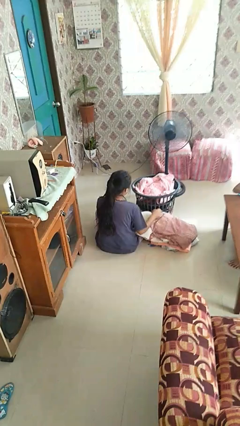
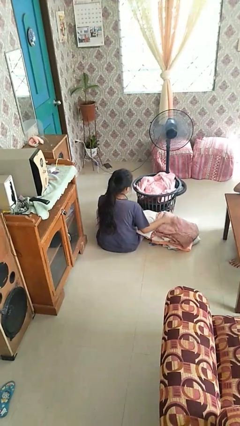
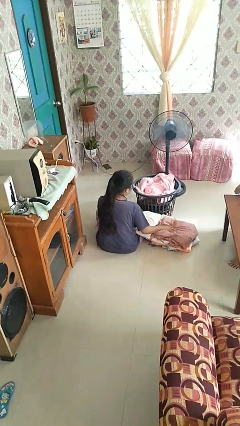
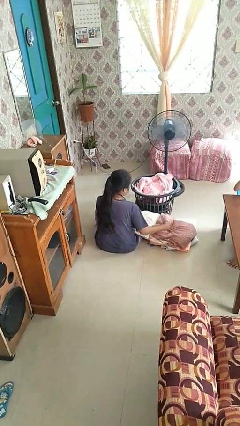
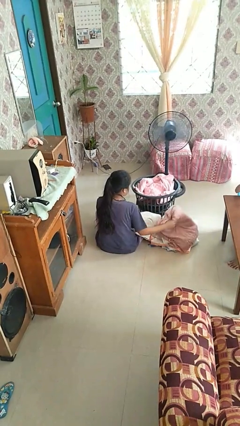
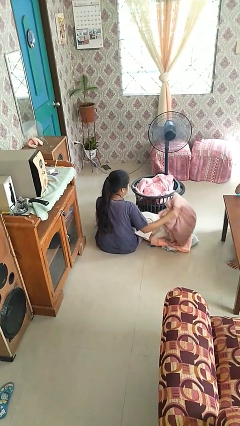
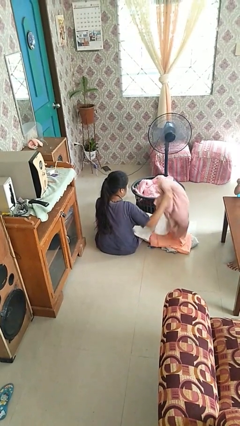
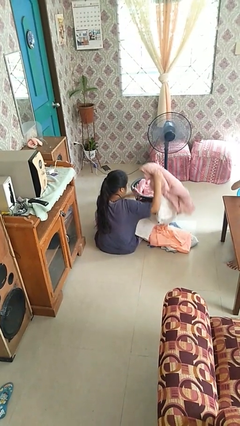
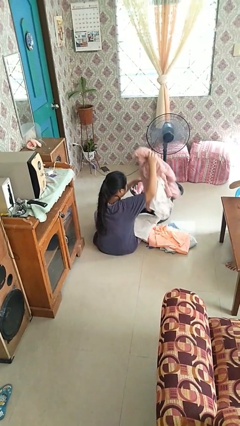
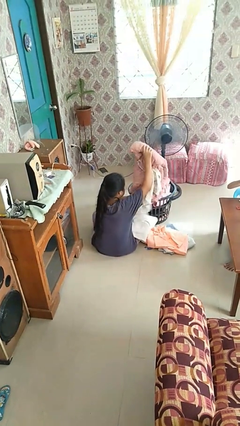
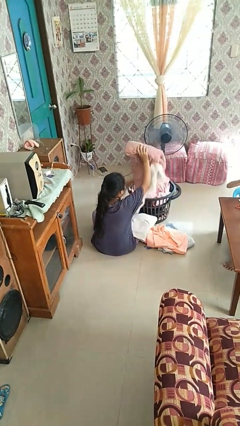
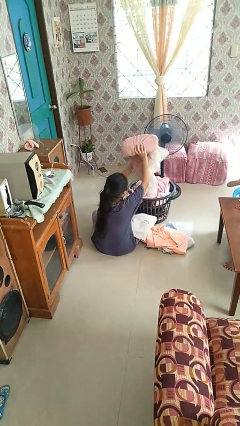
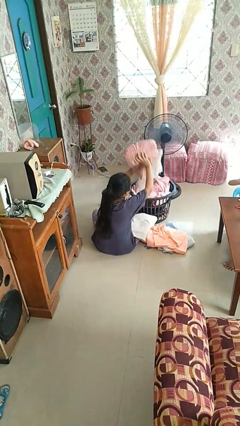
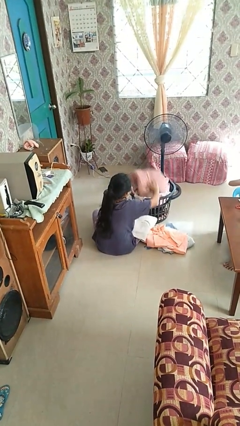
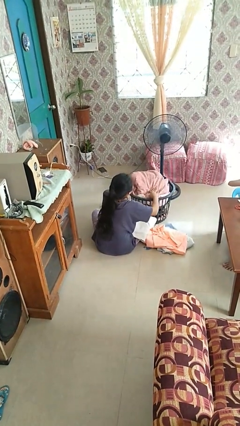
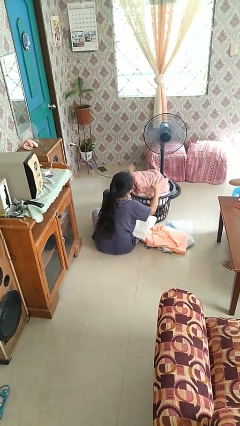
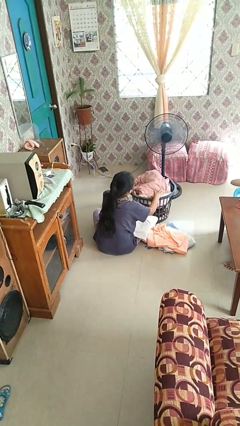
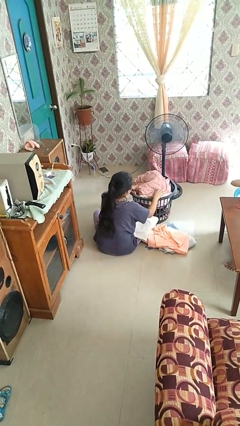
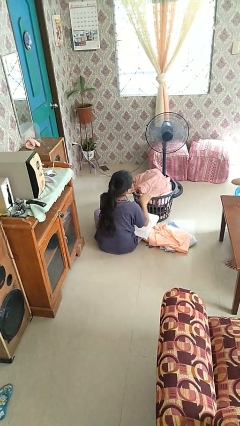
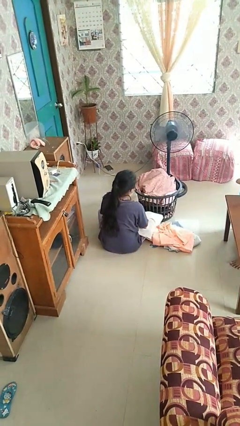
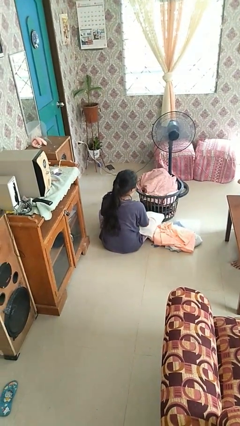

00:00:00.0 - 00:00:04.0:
person puts object into basket

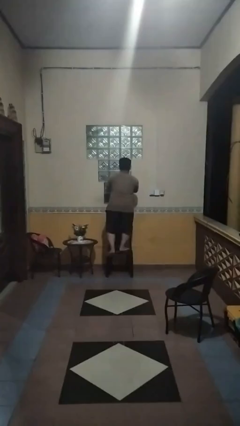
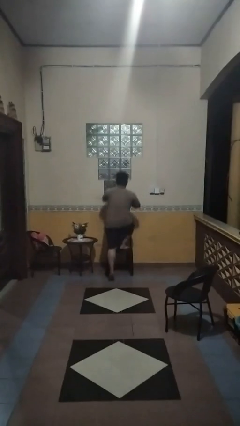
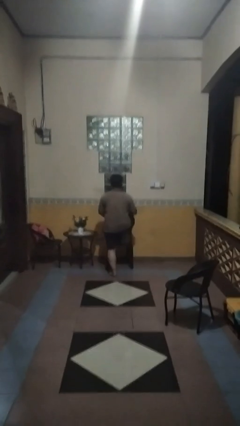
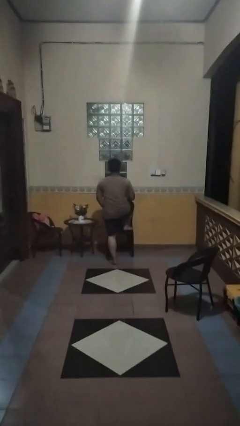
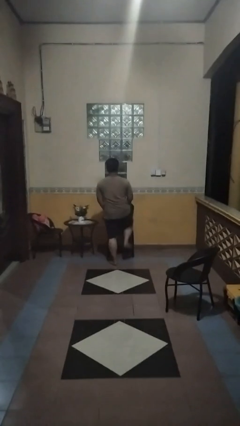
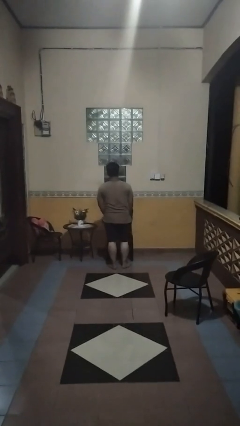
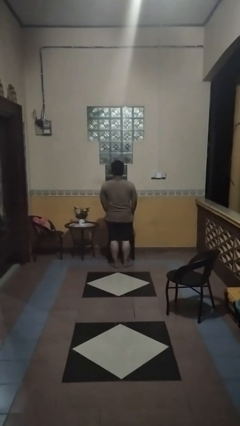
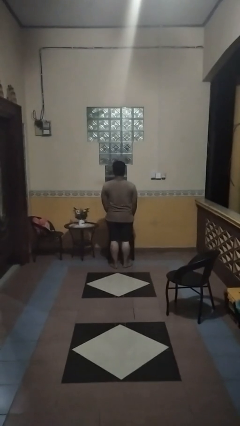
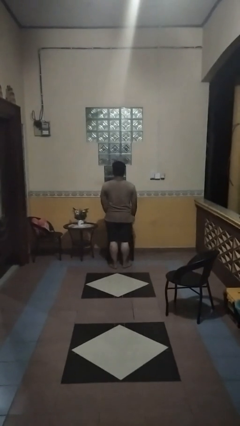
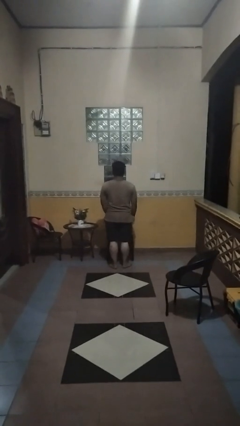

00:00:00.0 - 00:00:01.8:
person climbs off chair

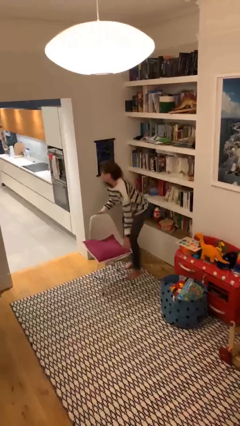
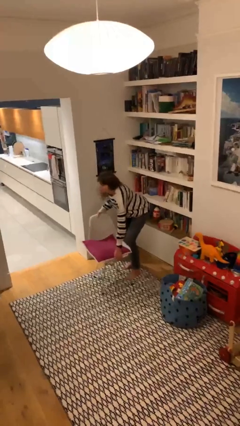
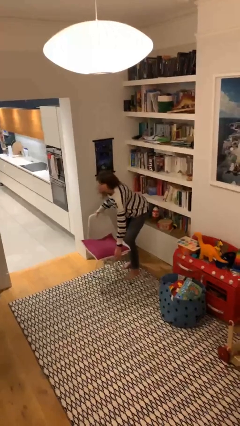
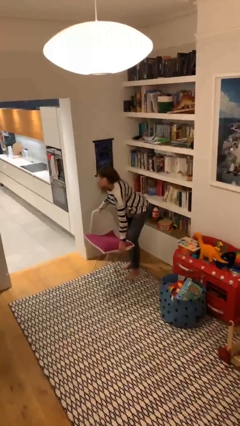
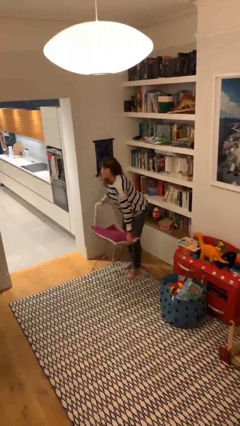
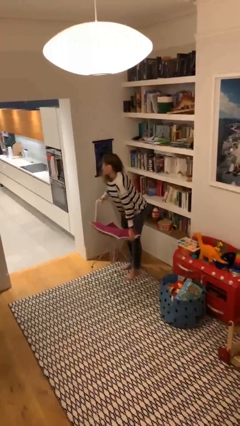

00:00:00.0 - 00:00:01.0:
person picks up object from floor

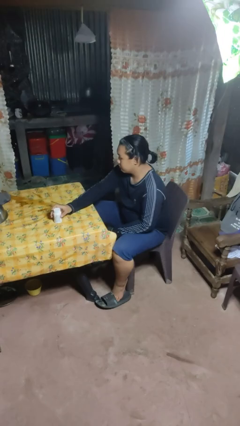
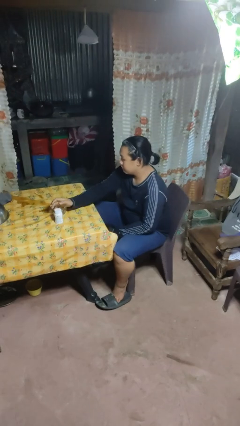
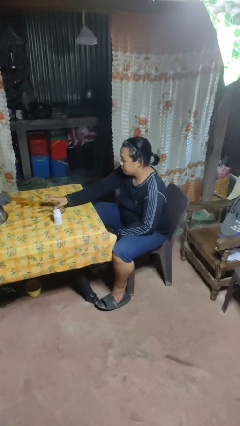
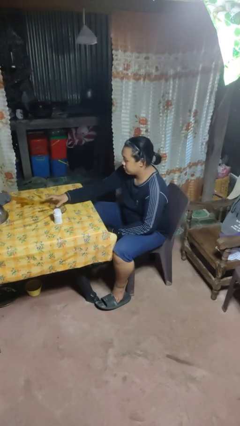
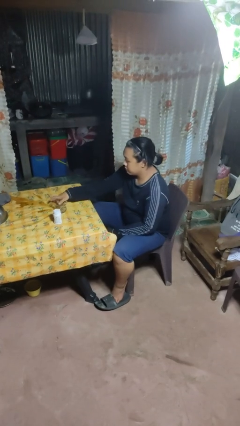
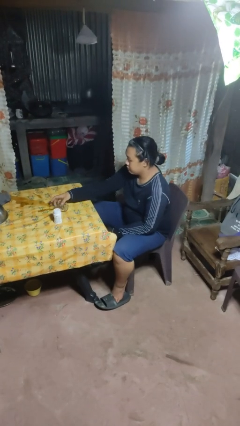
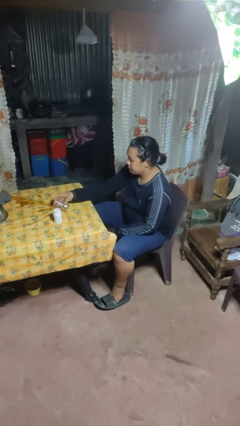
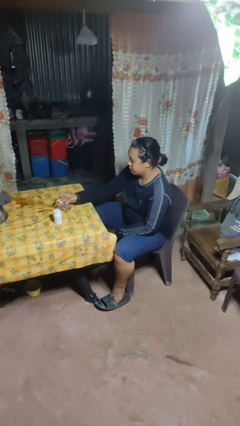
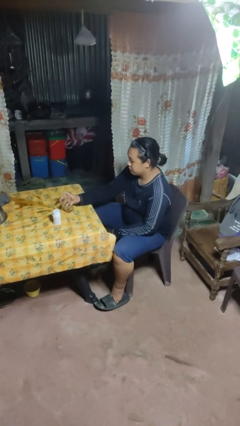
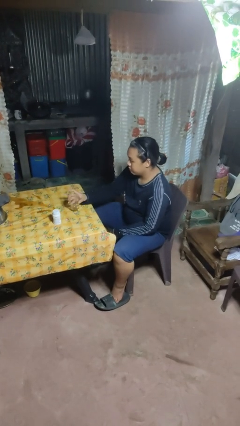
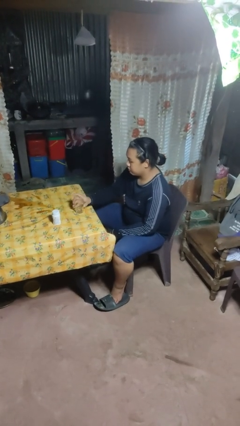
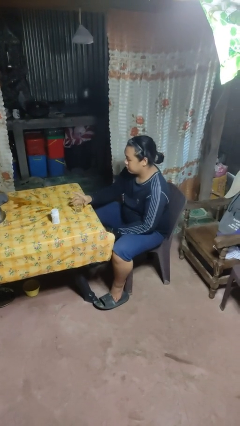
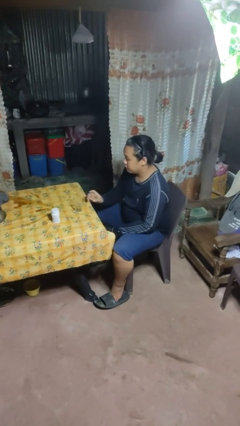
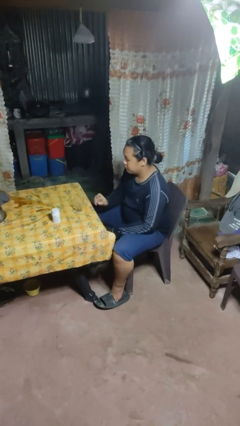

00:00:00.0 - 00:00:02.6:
person sets upright glass

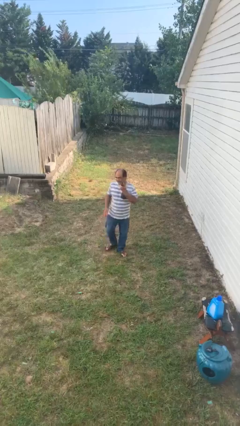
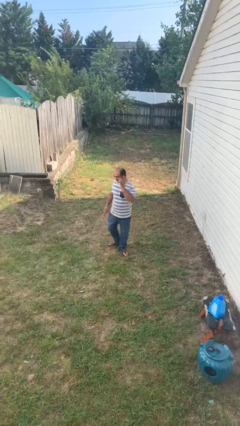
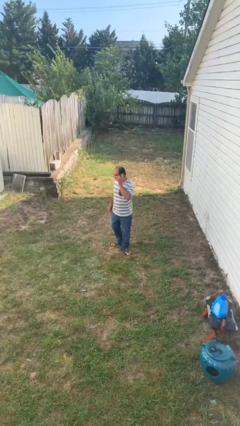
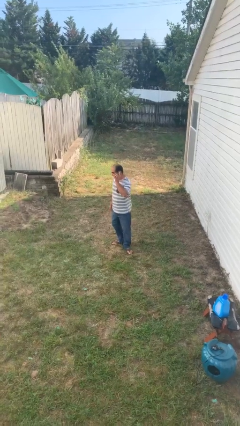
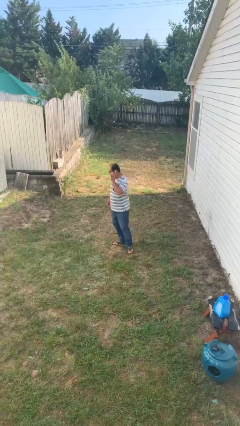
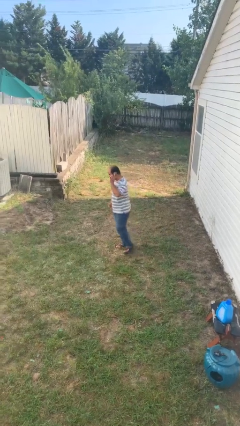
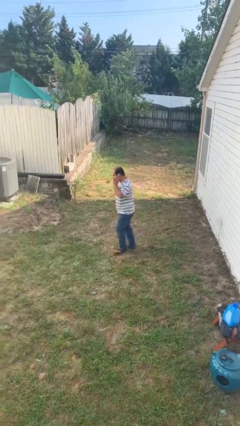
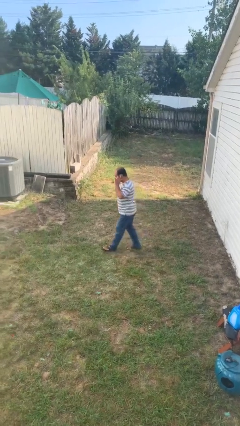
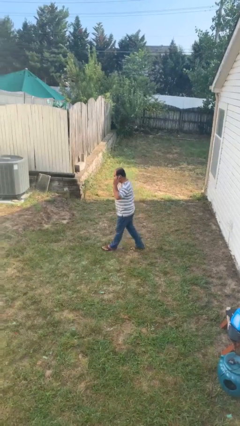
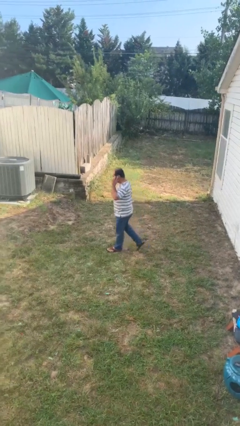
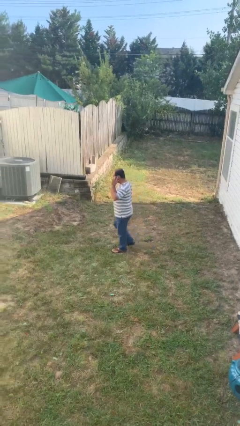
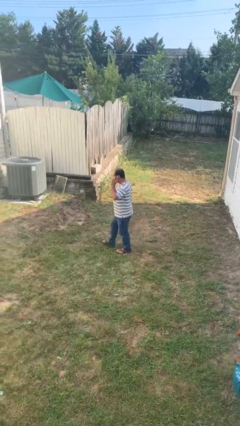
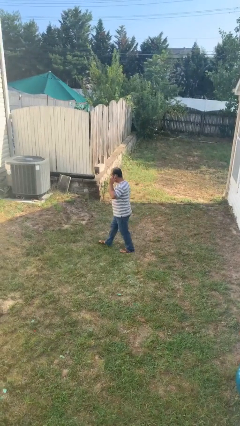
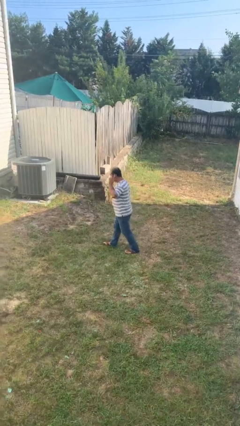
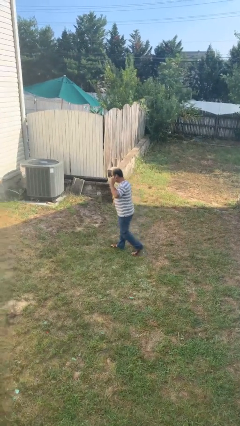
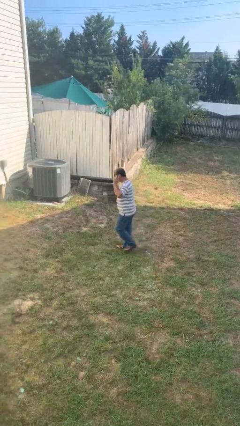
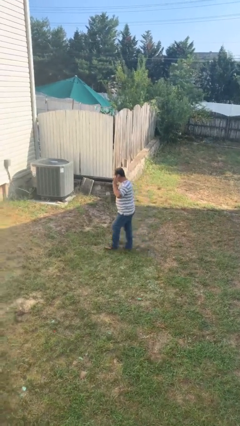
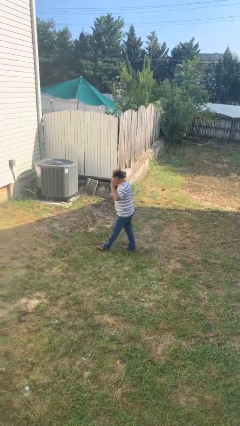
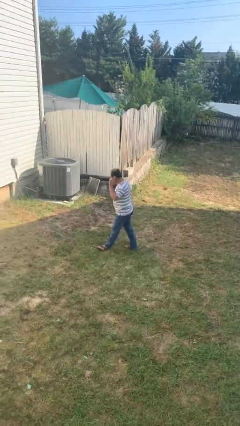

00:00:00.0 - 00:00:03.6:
person talks on phone

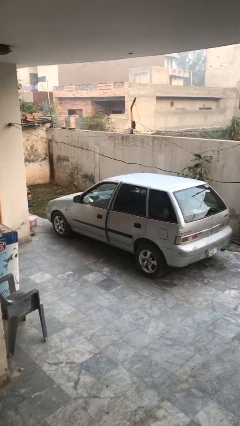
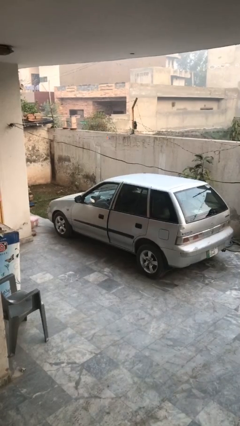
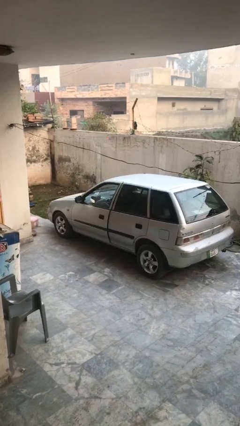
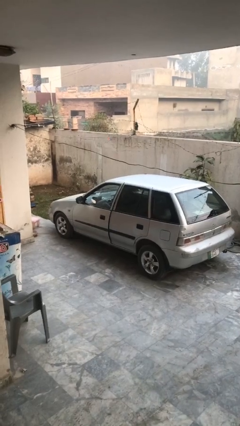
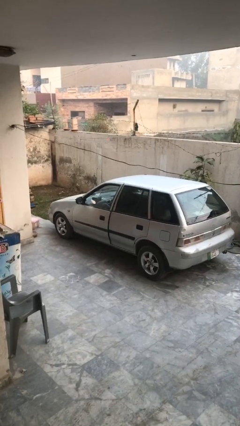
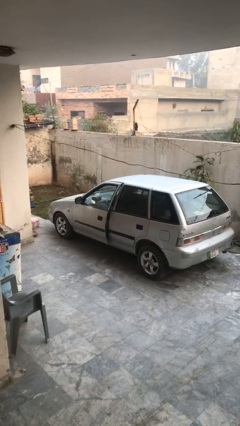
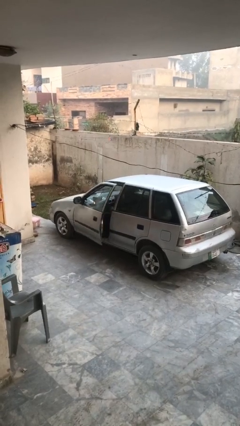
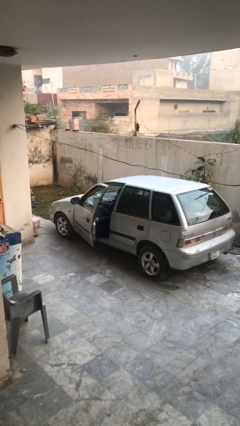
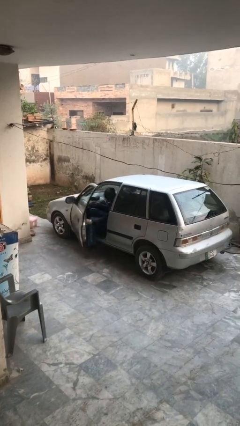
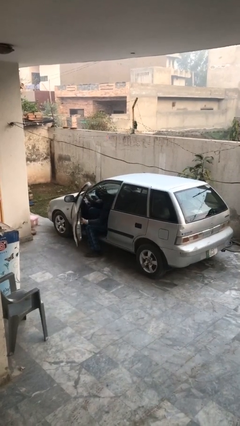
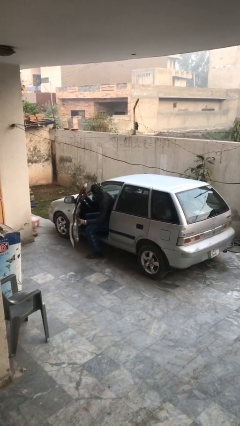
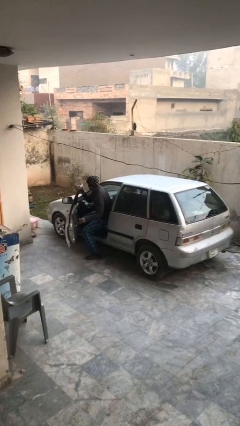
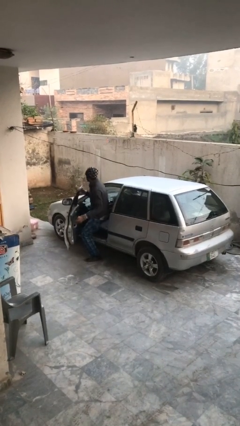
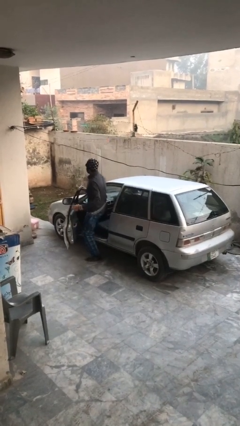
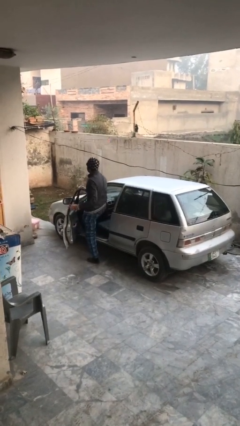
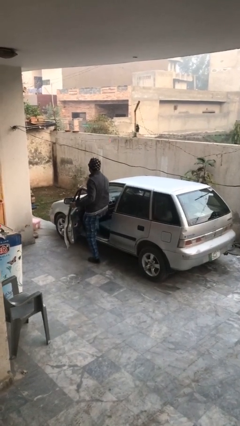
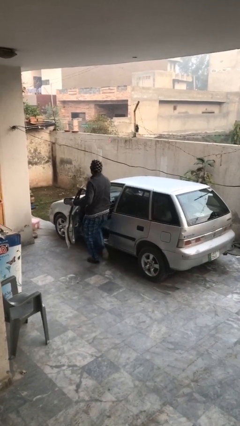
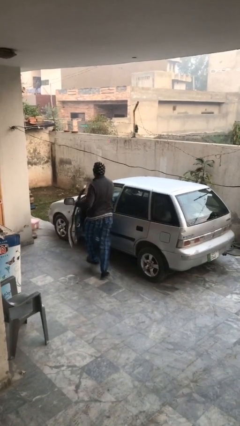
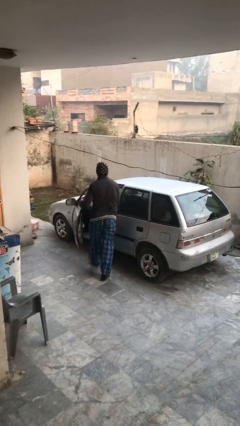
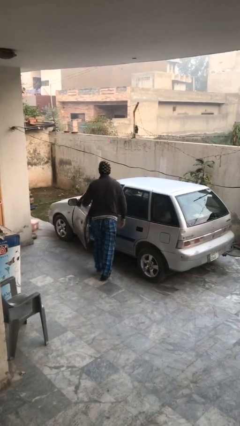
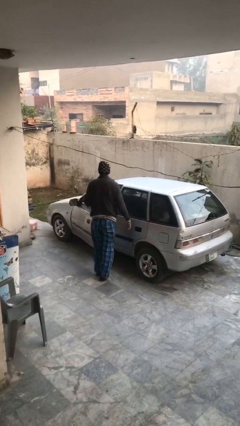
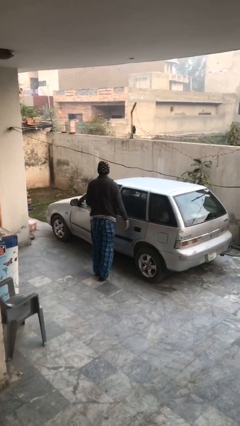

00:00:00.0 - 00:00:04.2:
car drops off person
